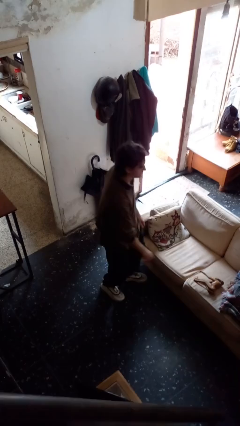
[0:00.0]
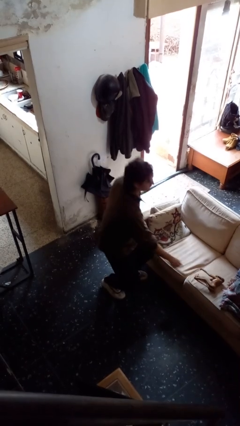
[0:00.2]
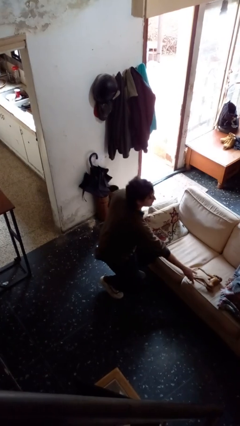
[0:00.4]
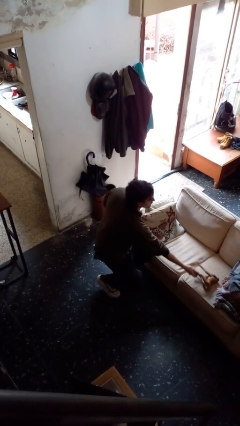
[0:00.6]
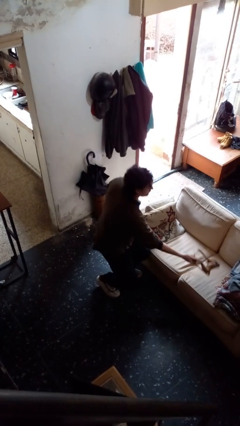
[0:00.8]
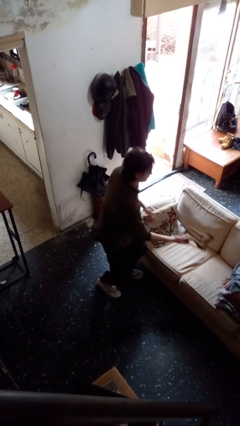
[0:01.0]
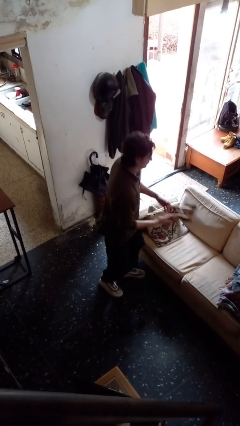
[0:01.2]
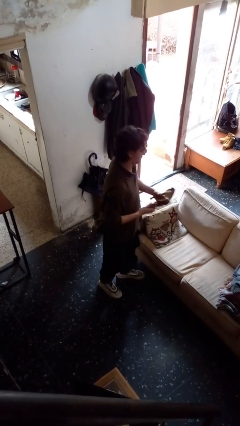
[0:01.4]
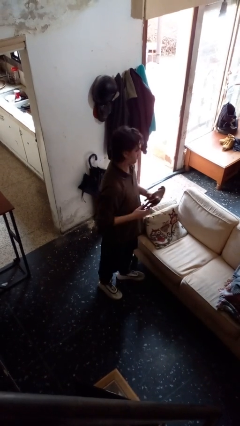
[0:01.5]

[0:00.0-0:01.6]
person picks up object from couch

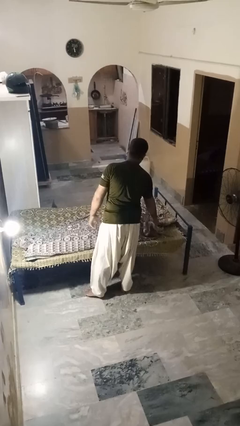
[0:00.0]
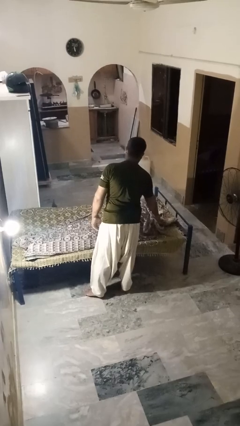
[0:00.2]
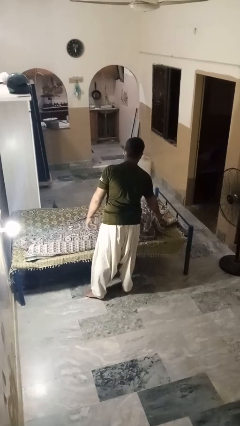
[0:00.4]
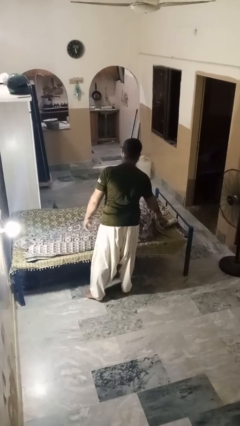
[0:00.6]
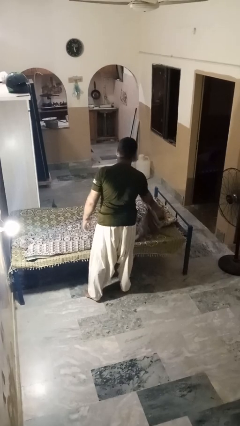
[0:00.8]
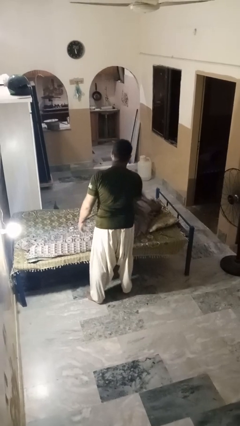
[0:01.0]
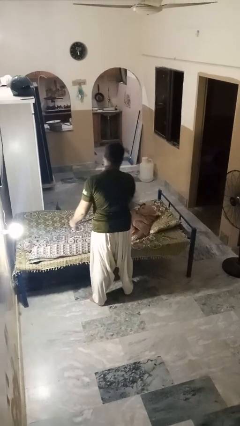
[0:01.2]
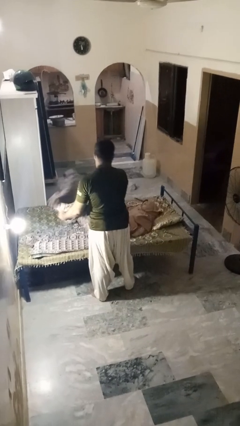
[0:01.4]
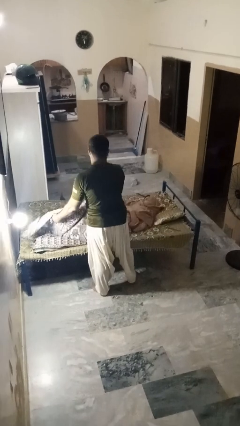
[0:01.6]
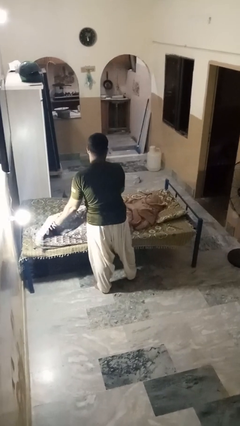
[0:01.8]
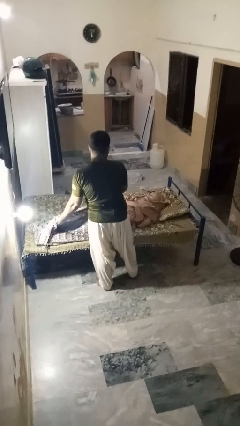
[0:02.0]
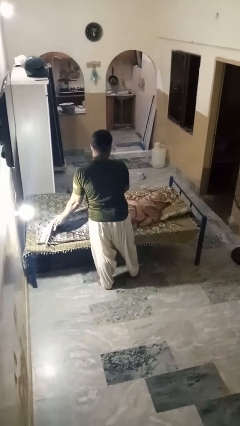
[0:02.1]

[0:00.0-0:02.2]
person uncovers friend with blanket

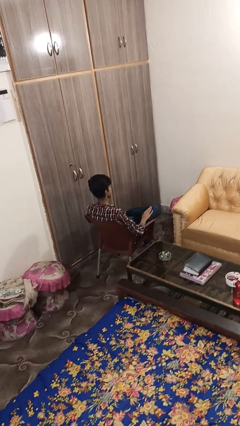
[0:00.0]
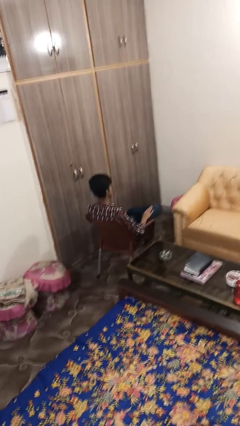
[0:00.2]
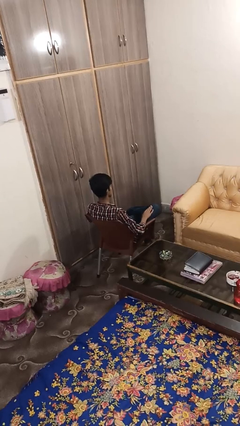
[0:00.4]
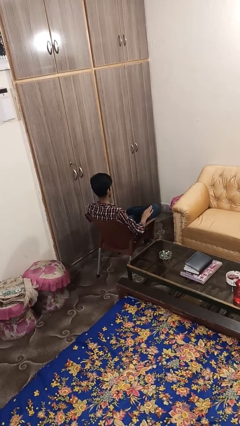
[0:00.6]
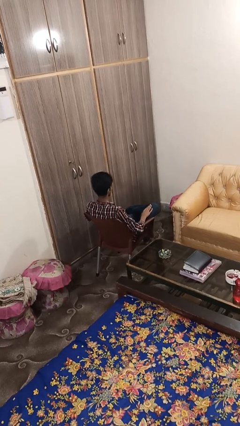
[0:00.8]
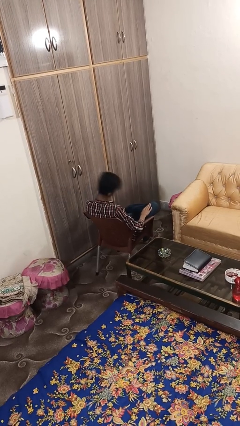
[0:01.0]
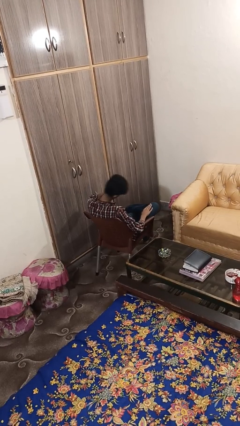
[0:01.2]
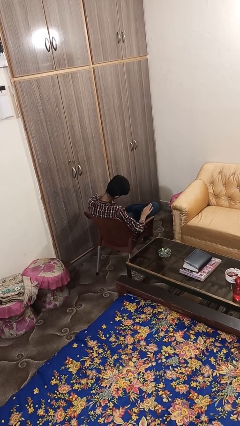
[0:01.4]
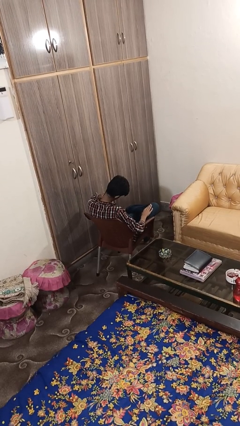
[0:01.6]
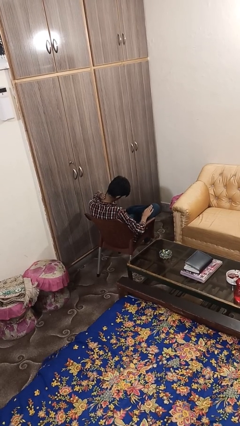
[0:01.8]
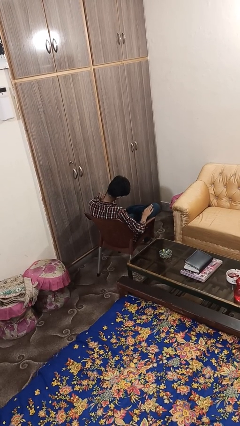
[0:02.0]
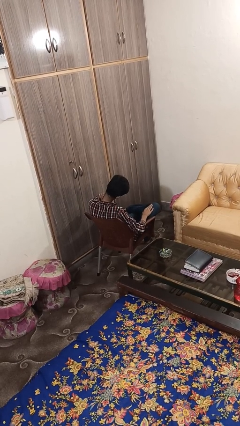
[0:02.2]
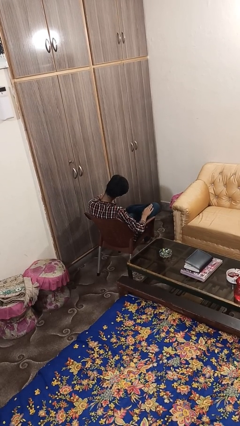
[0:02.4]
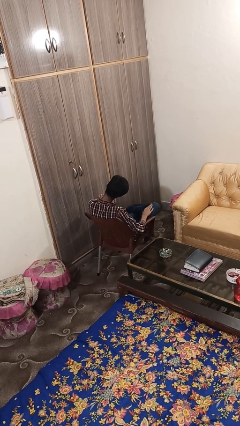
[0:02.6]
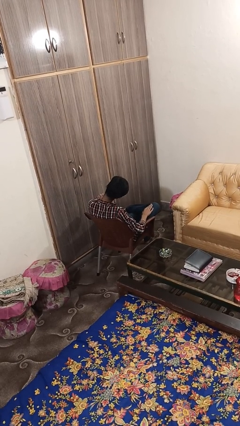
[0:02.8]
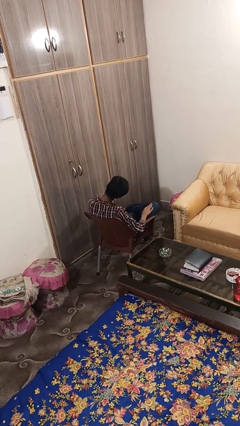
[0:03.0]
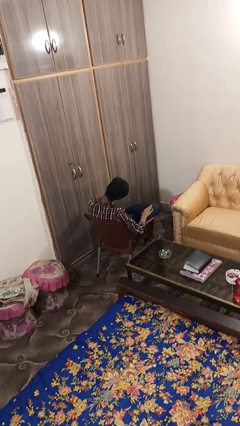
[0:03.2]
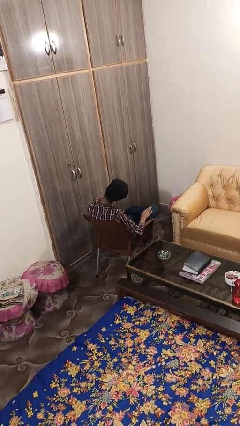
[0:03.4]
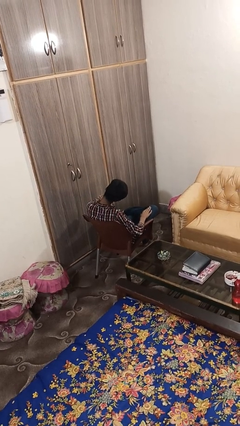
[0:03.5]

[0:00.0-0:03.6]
person swats bug

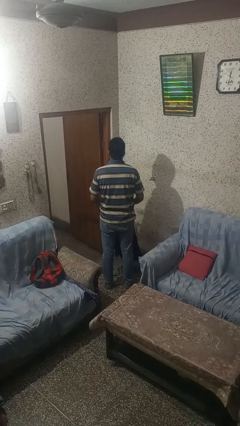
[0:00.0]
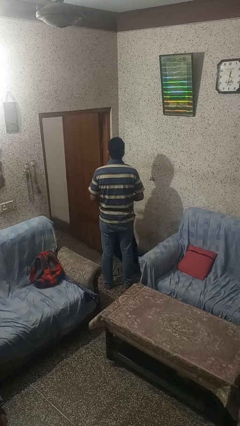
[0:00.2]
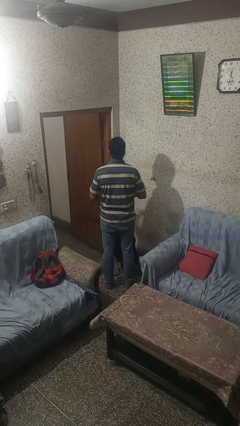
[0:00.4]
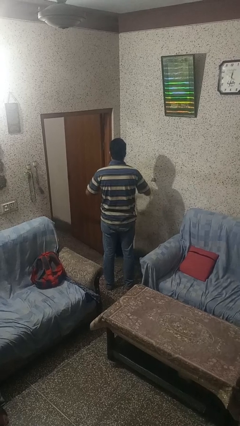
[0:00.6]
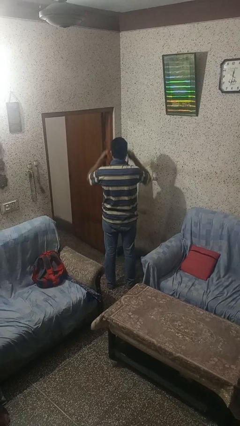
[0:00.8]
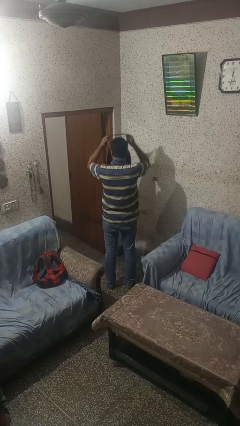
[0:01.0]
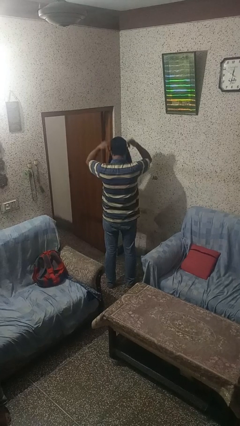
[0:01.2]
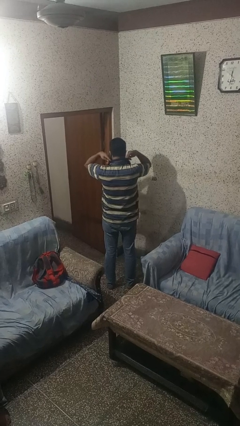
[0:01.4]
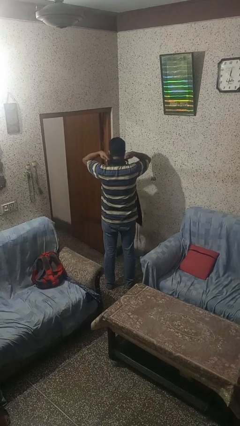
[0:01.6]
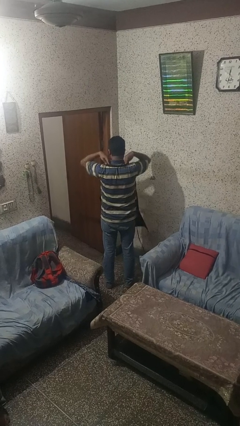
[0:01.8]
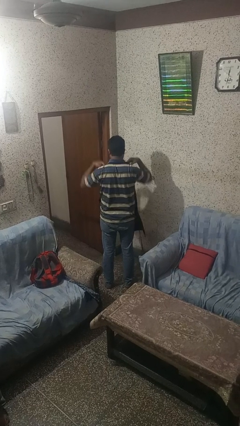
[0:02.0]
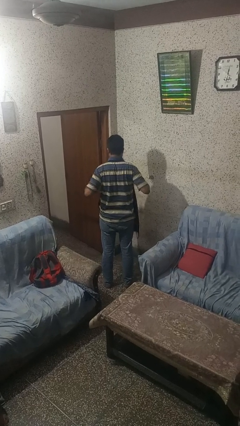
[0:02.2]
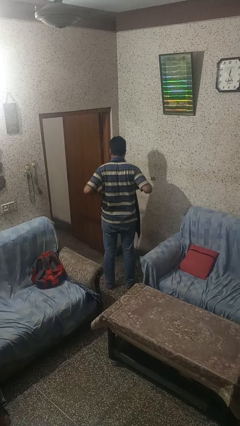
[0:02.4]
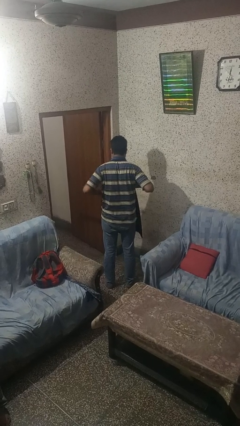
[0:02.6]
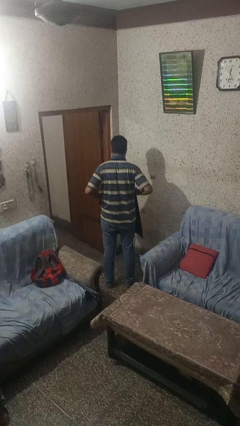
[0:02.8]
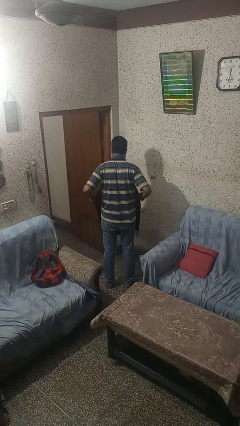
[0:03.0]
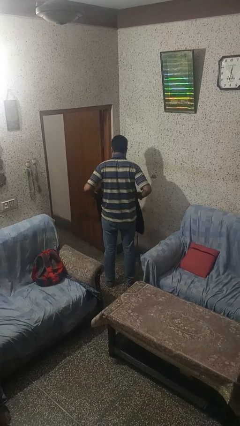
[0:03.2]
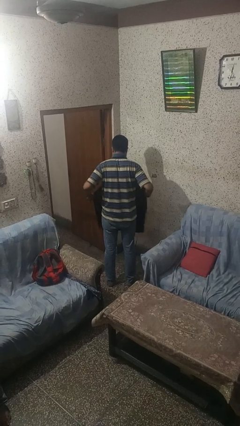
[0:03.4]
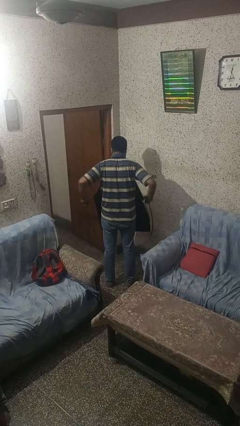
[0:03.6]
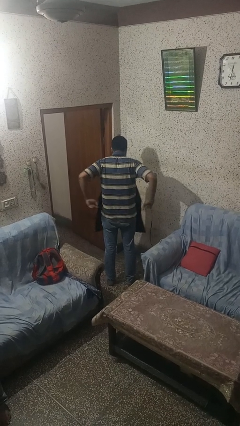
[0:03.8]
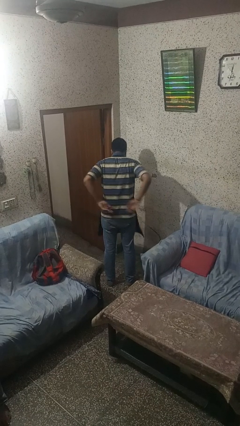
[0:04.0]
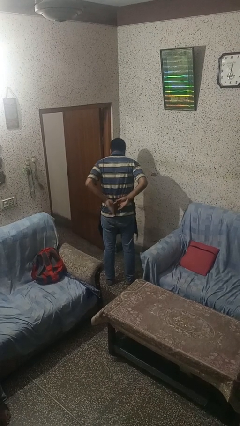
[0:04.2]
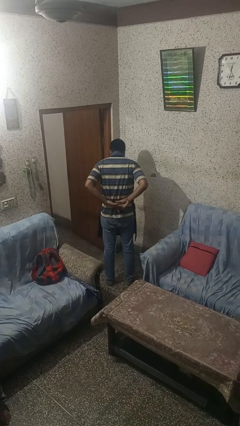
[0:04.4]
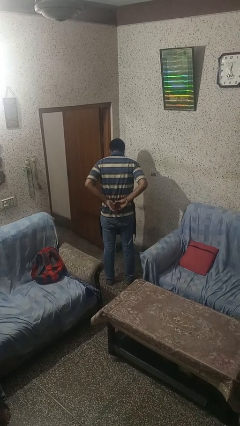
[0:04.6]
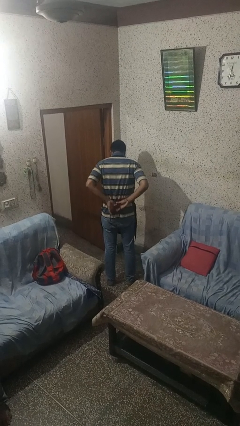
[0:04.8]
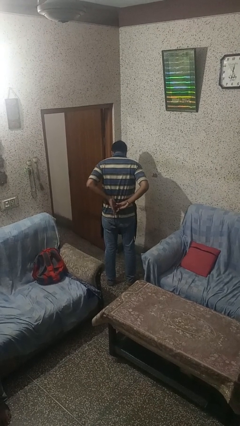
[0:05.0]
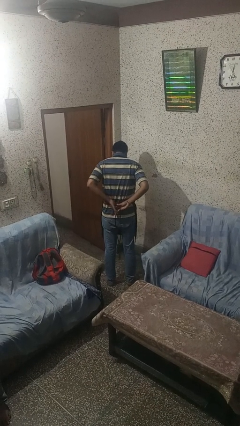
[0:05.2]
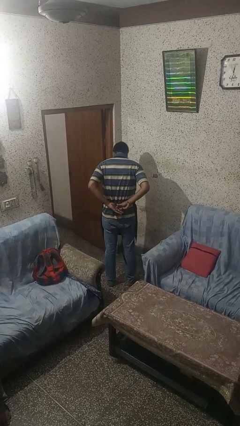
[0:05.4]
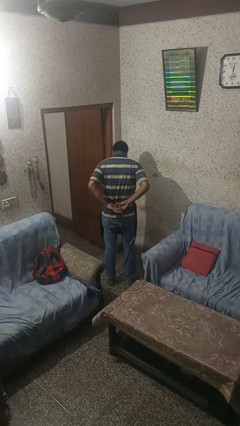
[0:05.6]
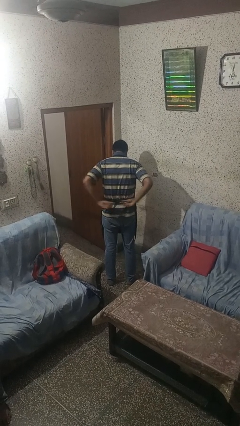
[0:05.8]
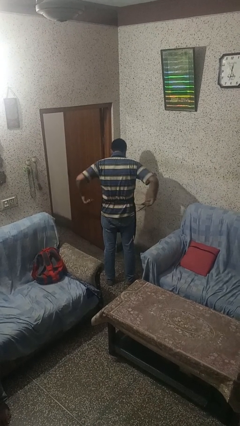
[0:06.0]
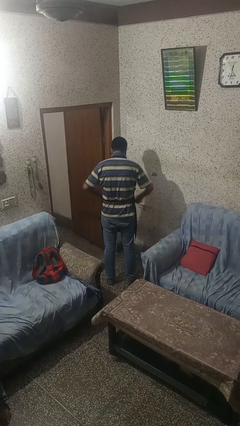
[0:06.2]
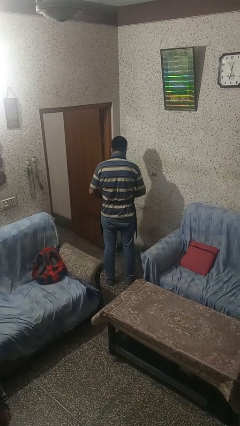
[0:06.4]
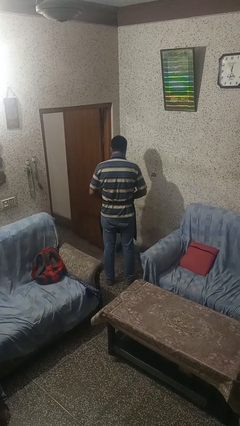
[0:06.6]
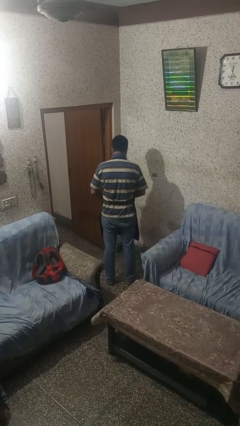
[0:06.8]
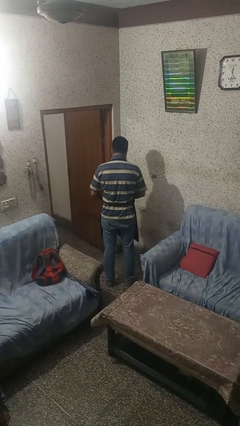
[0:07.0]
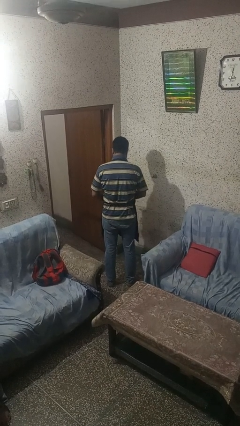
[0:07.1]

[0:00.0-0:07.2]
person puts on apron

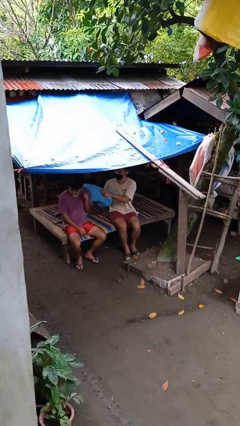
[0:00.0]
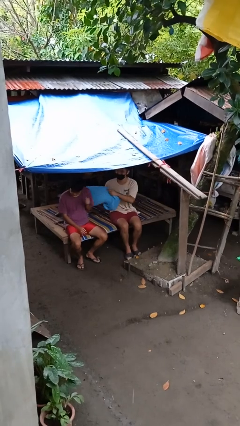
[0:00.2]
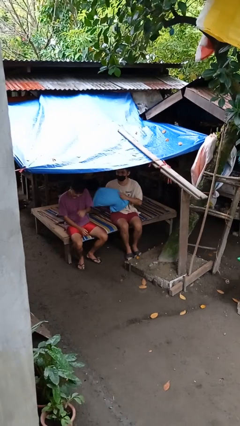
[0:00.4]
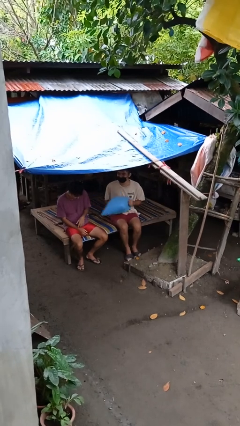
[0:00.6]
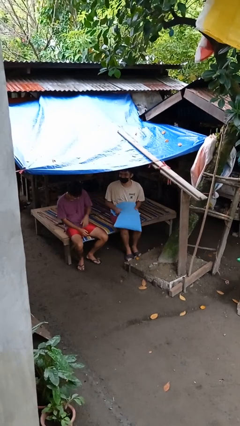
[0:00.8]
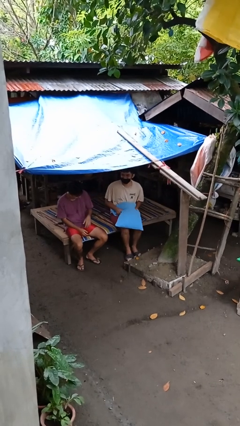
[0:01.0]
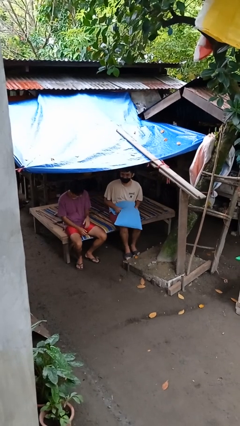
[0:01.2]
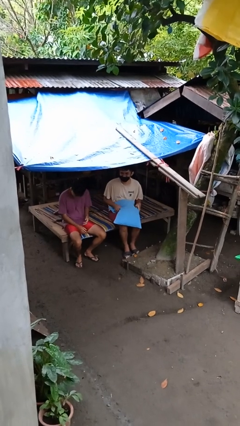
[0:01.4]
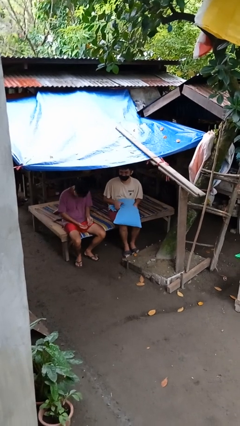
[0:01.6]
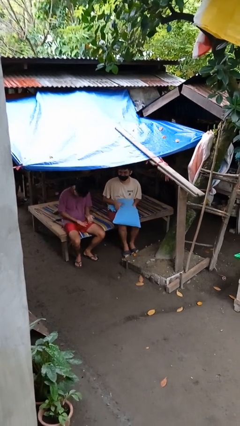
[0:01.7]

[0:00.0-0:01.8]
person hits person with pillow

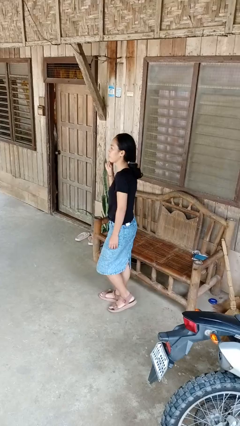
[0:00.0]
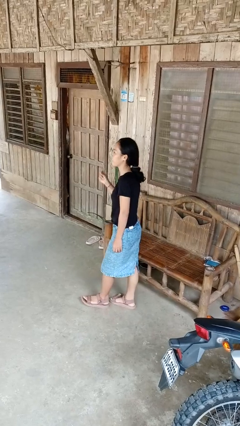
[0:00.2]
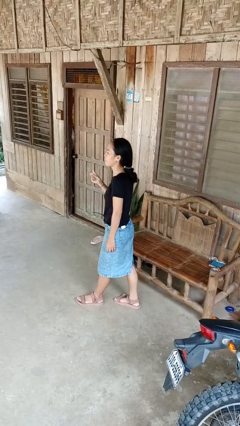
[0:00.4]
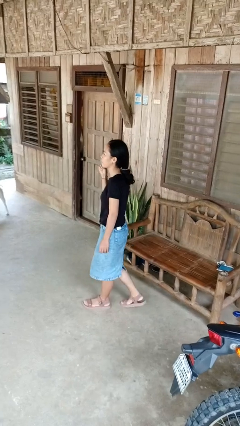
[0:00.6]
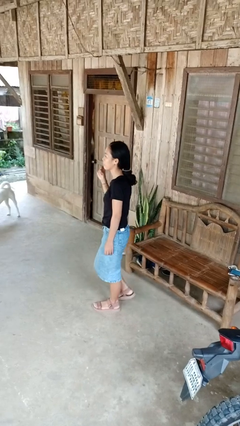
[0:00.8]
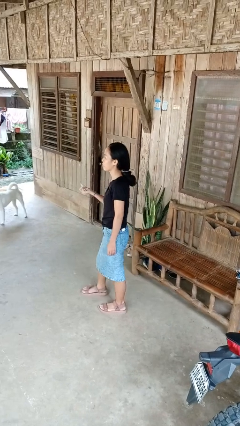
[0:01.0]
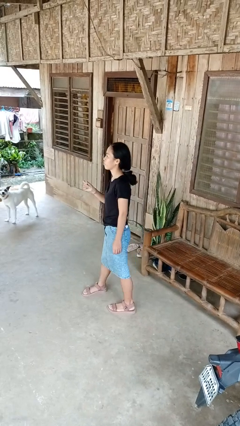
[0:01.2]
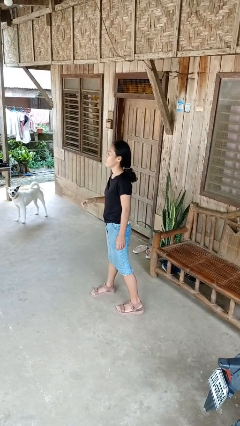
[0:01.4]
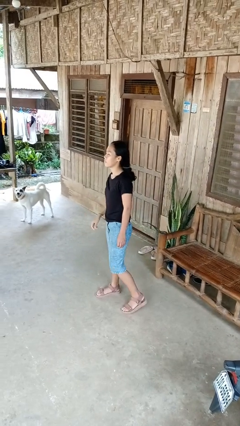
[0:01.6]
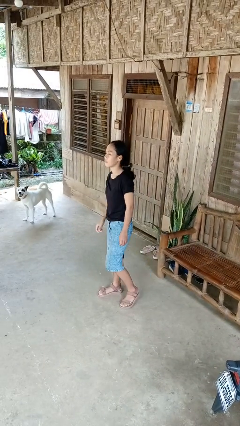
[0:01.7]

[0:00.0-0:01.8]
person snaps fingers
